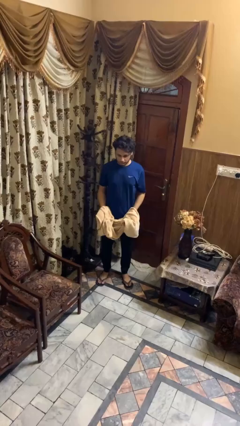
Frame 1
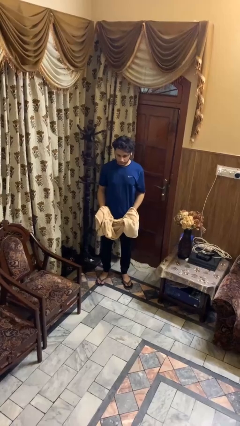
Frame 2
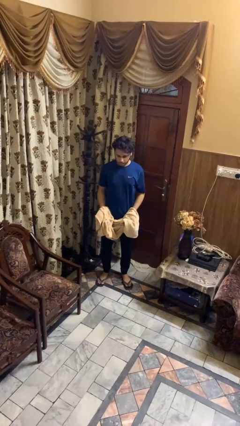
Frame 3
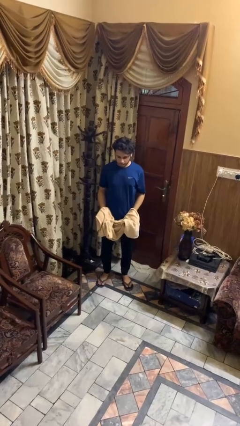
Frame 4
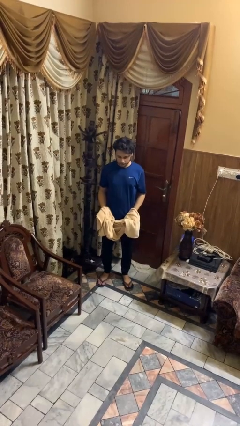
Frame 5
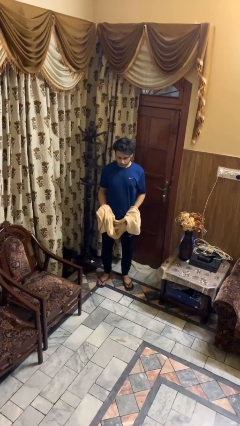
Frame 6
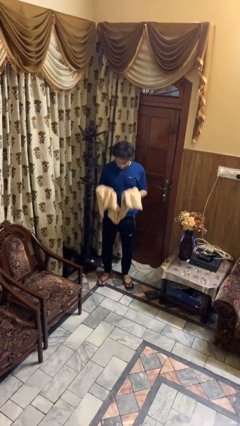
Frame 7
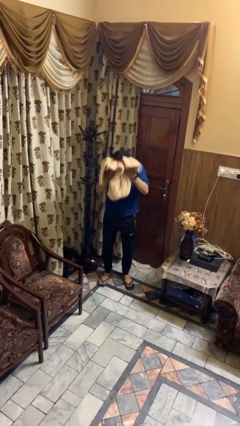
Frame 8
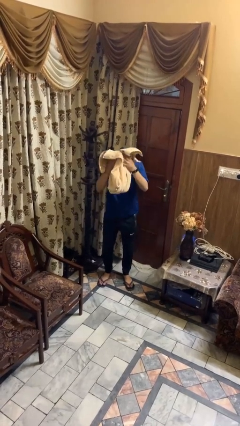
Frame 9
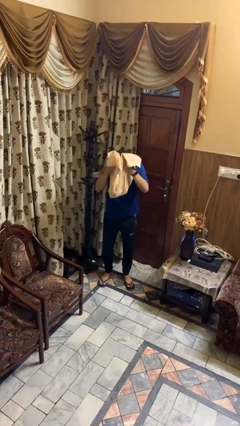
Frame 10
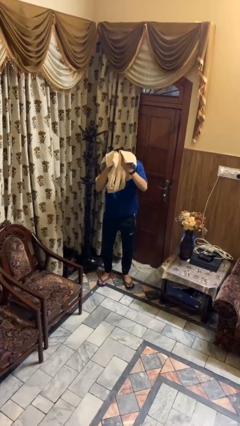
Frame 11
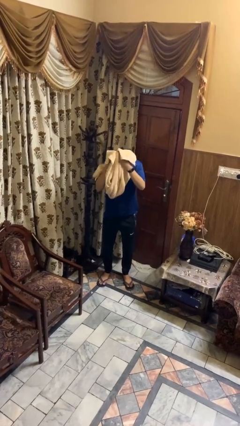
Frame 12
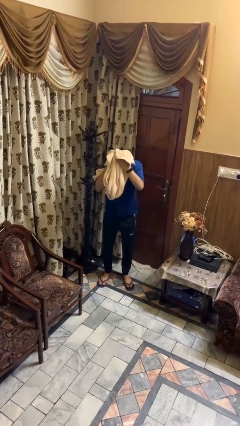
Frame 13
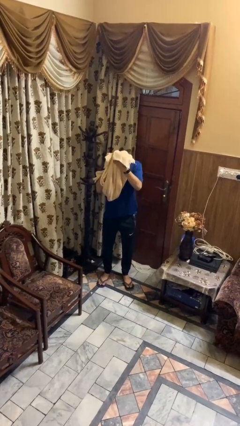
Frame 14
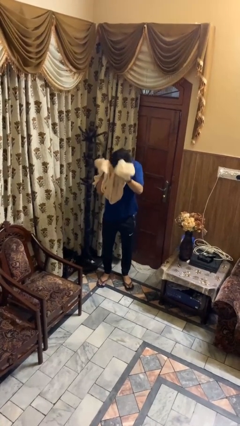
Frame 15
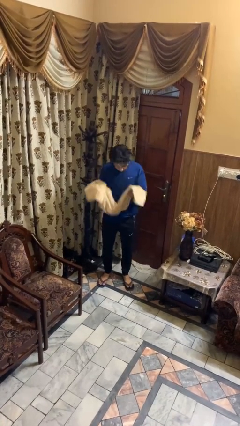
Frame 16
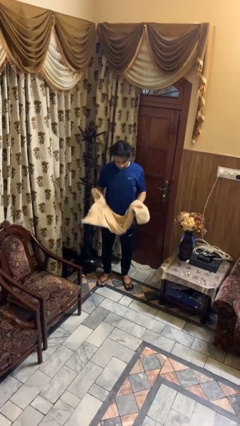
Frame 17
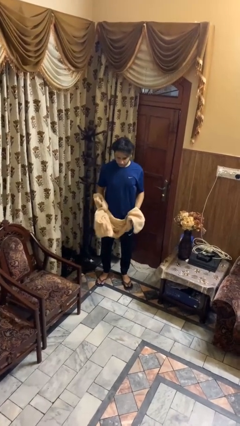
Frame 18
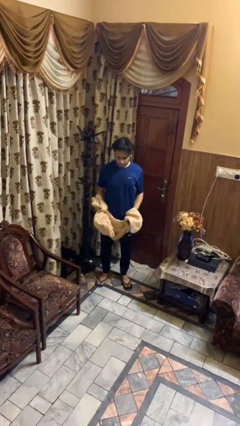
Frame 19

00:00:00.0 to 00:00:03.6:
person dries hair with towel

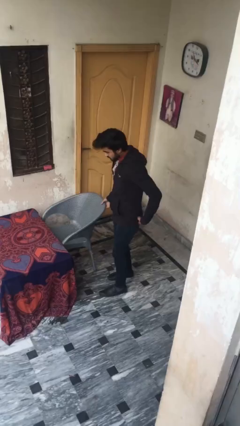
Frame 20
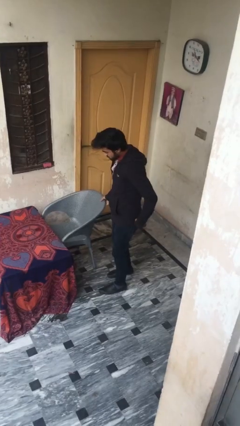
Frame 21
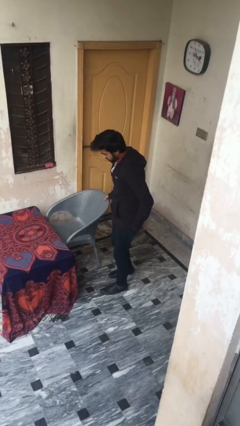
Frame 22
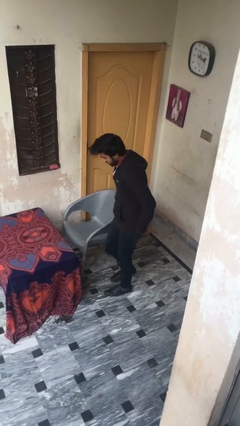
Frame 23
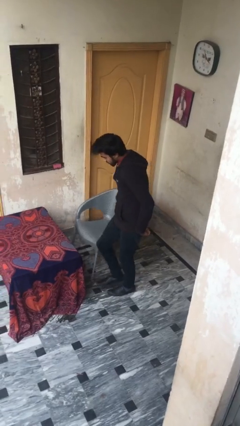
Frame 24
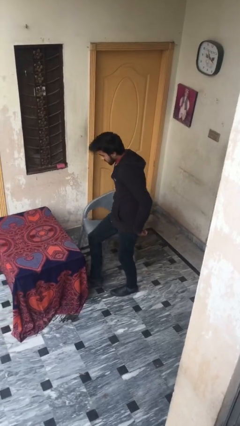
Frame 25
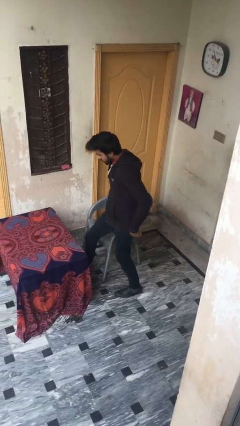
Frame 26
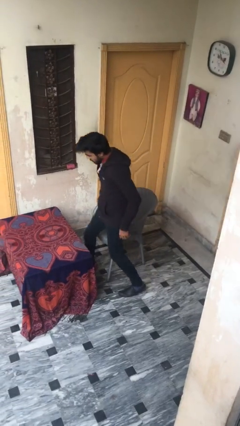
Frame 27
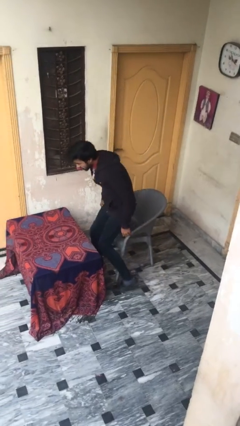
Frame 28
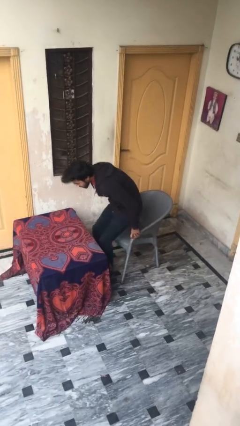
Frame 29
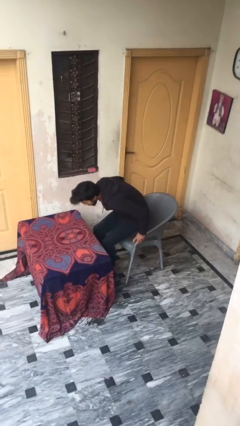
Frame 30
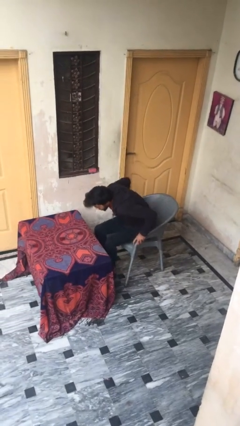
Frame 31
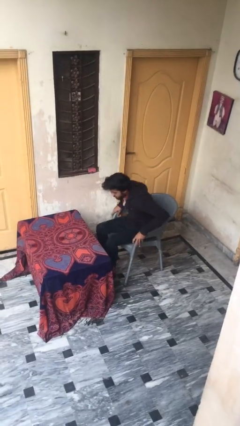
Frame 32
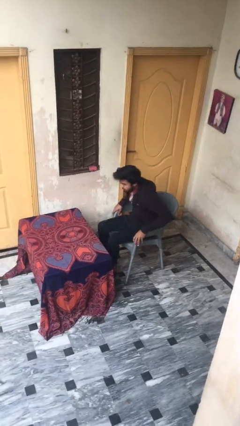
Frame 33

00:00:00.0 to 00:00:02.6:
person sits down

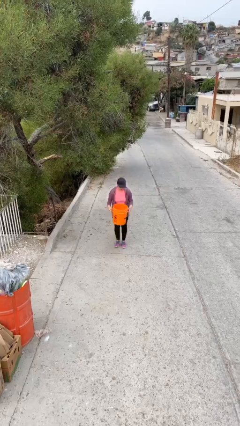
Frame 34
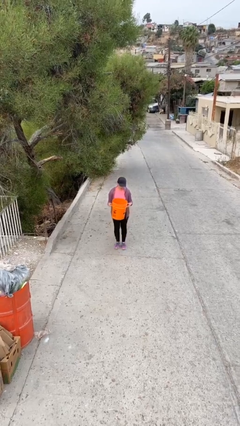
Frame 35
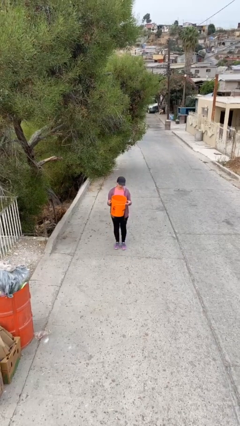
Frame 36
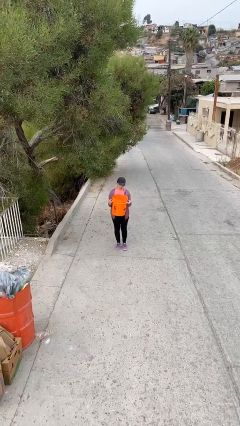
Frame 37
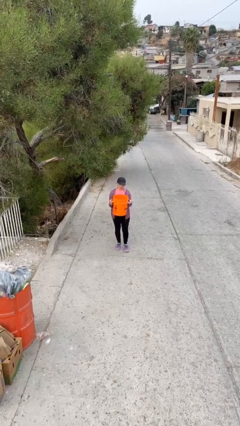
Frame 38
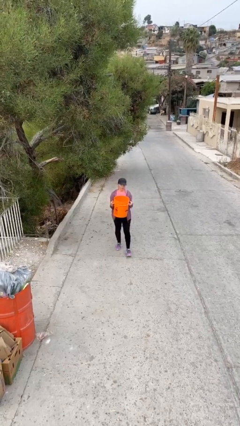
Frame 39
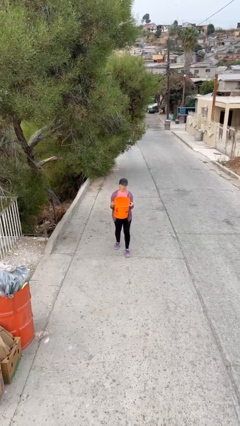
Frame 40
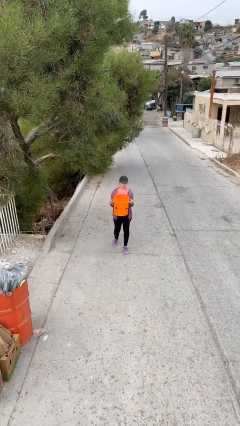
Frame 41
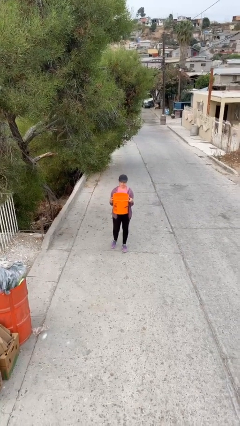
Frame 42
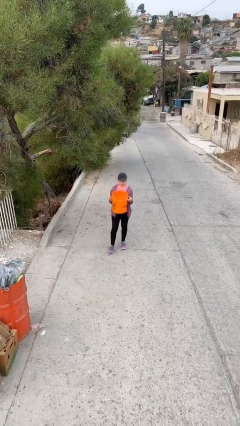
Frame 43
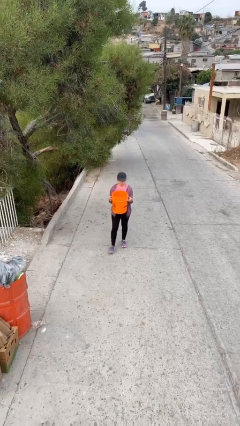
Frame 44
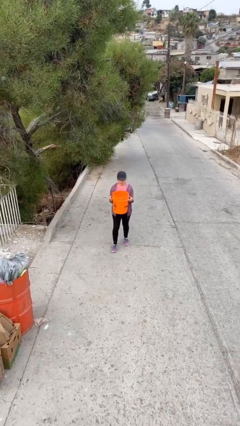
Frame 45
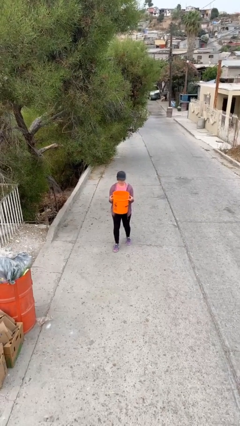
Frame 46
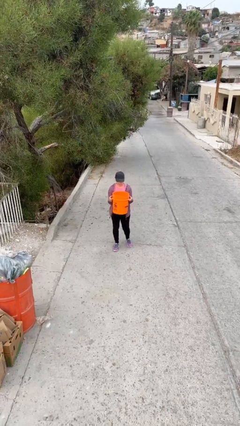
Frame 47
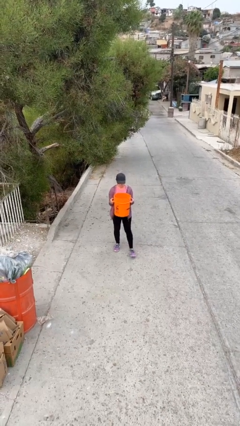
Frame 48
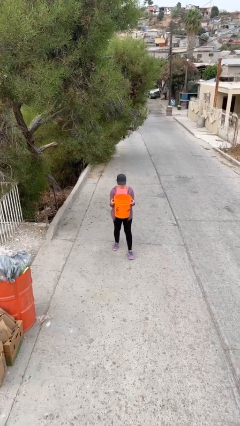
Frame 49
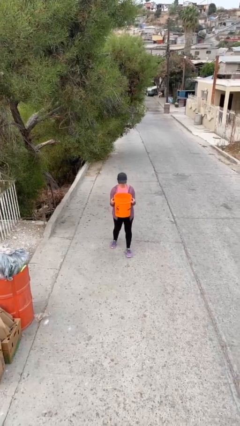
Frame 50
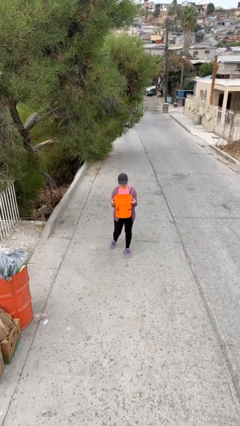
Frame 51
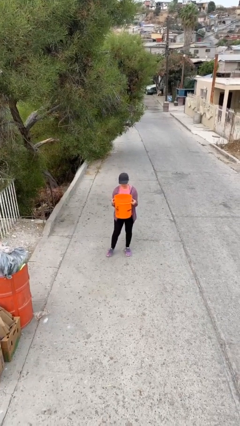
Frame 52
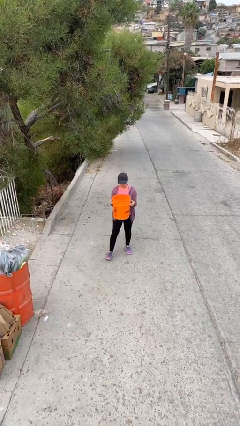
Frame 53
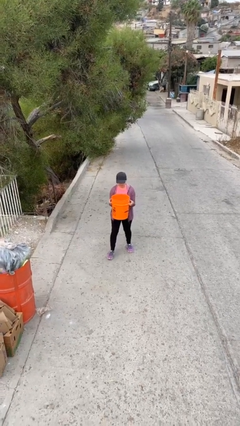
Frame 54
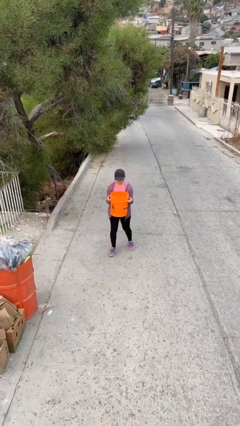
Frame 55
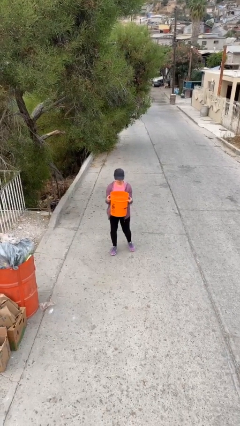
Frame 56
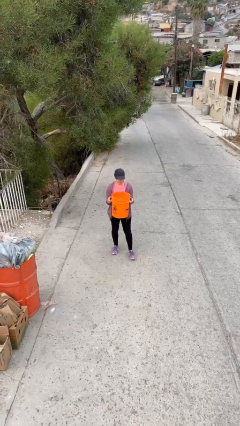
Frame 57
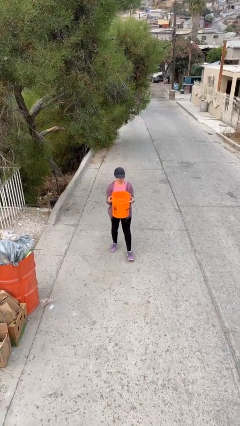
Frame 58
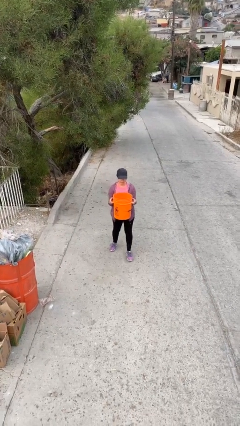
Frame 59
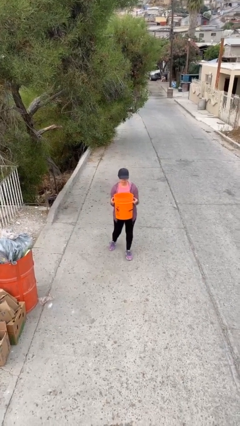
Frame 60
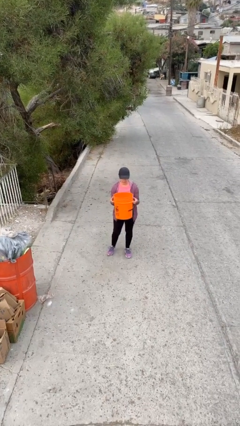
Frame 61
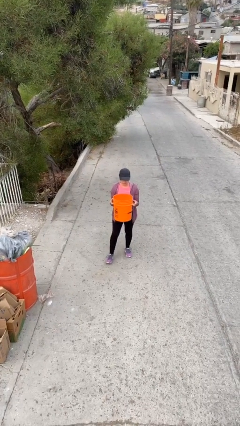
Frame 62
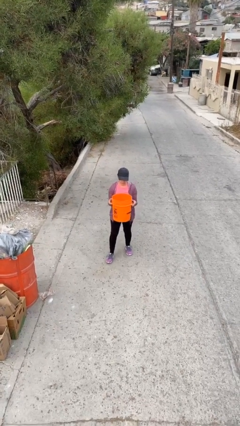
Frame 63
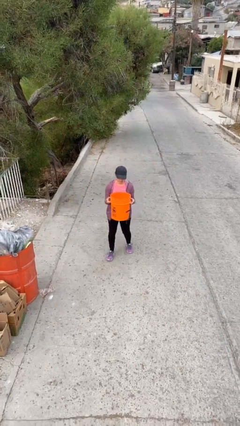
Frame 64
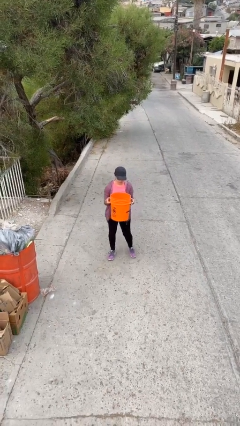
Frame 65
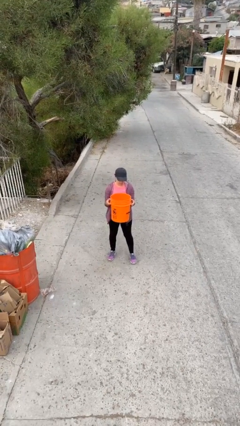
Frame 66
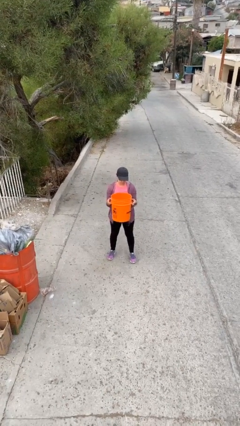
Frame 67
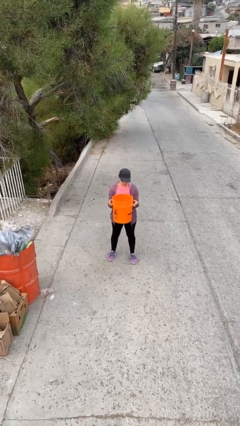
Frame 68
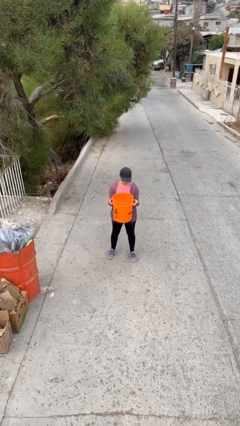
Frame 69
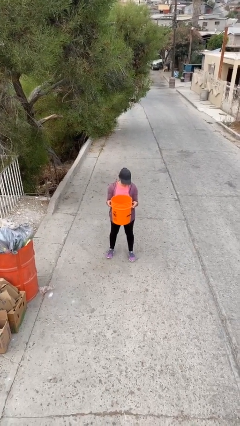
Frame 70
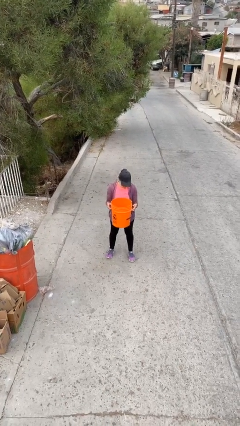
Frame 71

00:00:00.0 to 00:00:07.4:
person carries heavy object

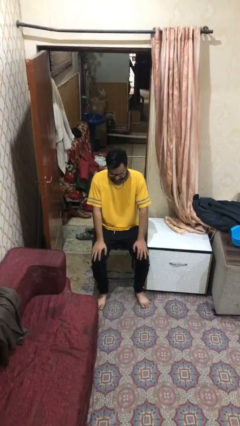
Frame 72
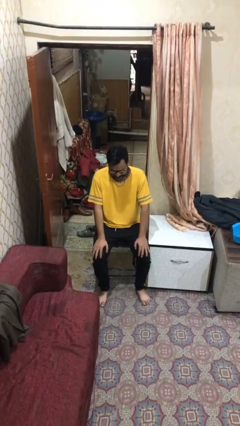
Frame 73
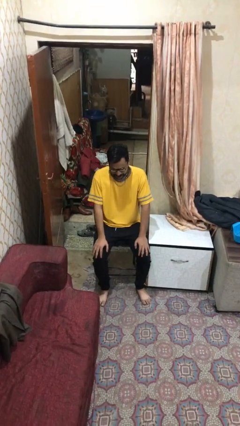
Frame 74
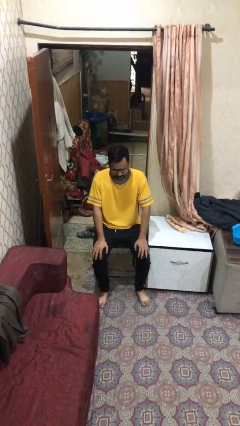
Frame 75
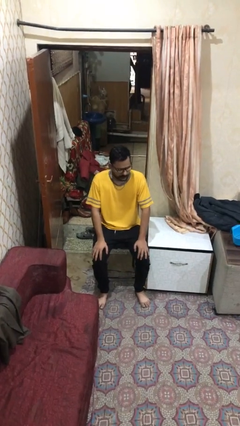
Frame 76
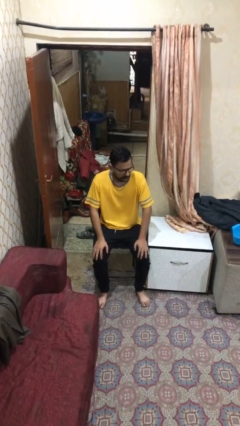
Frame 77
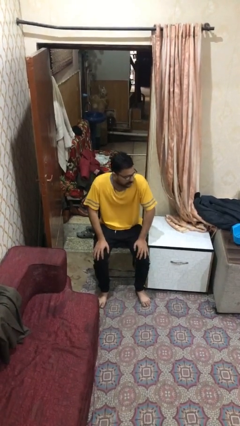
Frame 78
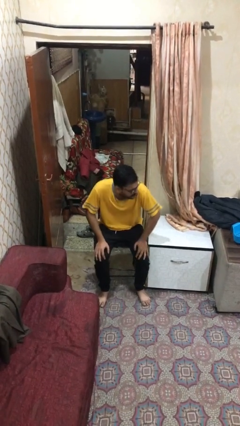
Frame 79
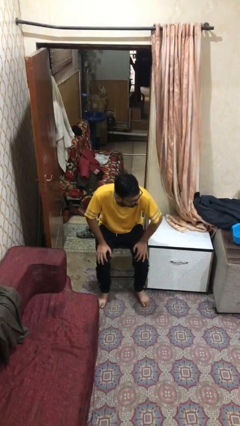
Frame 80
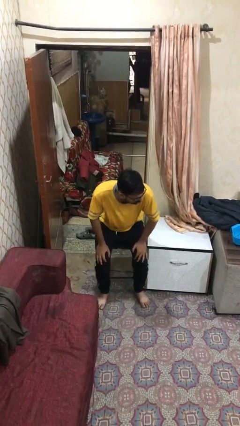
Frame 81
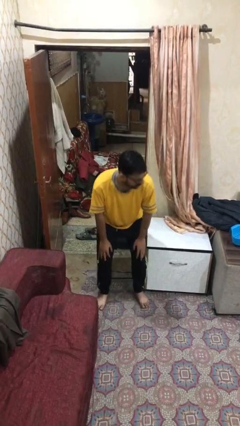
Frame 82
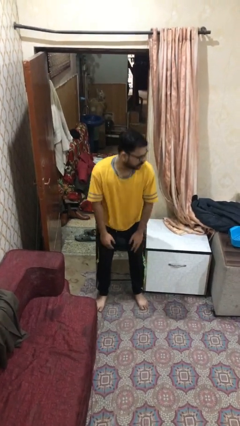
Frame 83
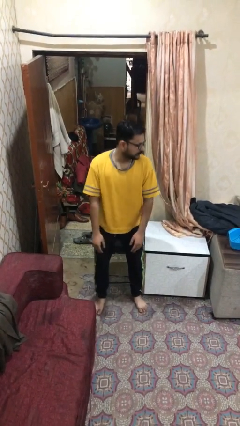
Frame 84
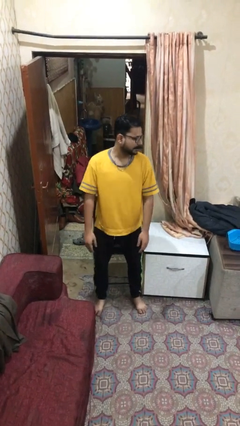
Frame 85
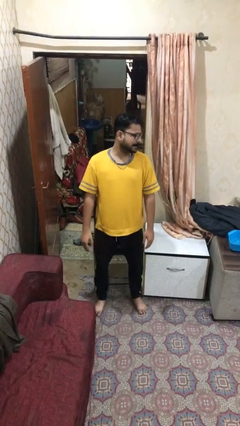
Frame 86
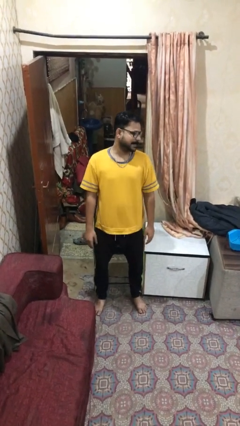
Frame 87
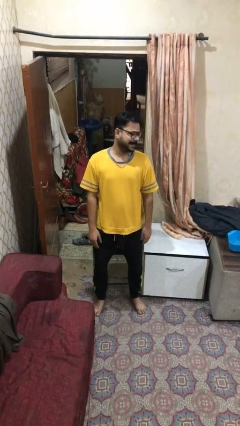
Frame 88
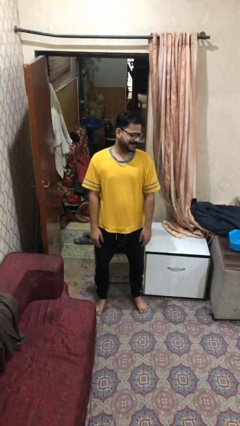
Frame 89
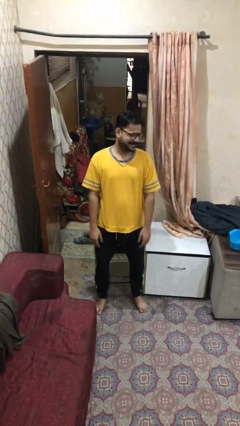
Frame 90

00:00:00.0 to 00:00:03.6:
person stands up

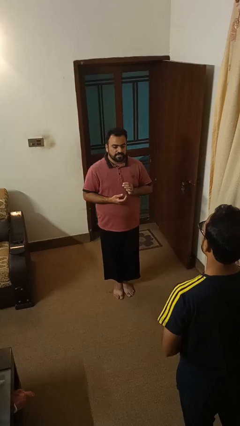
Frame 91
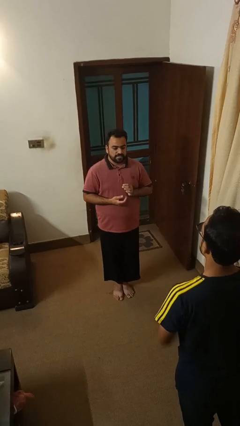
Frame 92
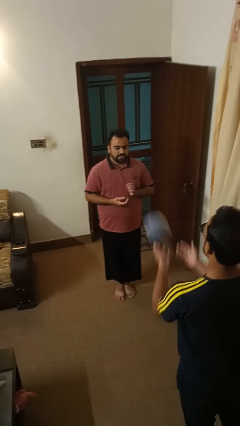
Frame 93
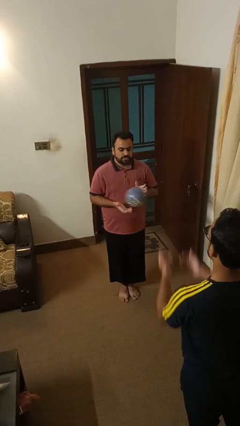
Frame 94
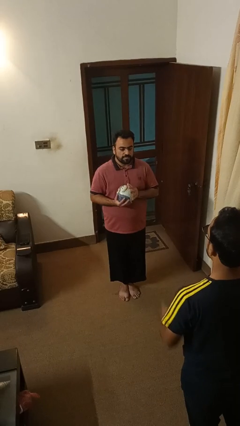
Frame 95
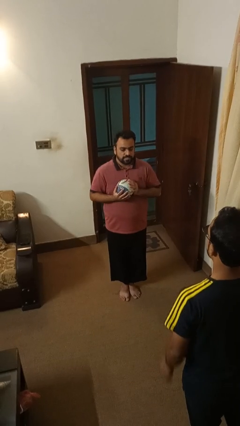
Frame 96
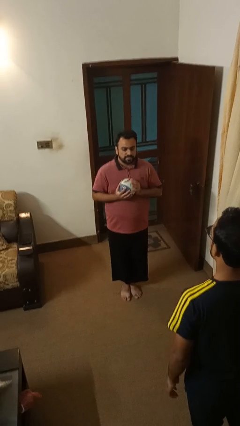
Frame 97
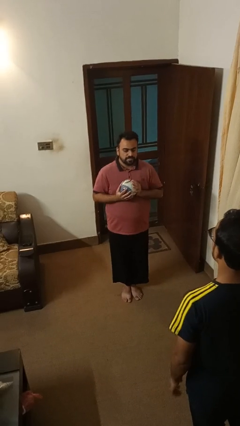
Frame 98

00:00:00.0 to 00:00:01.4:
person catches object from person
